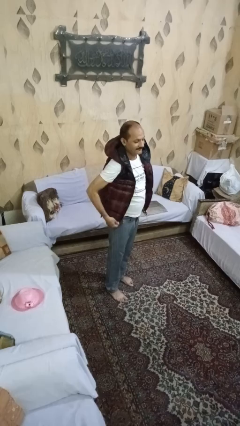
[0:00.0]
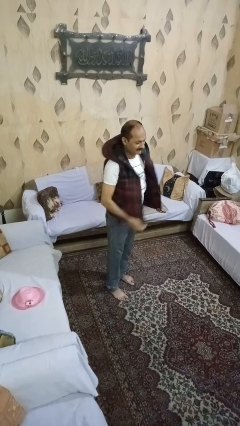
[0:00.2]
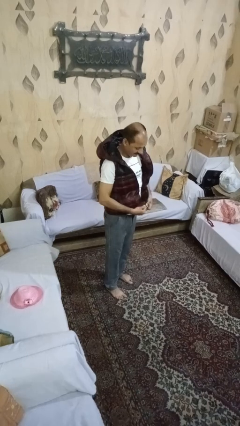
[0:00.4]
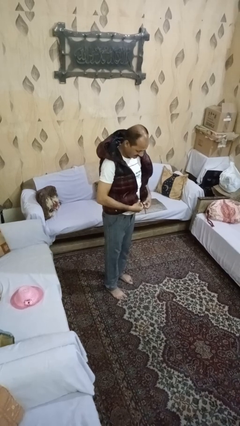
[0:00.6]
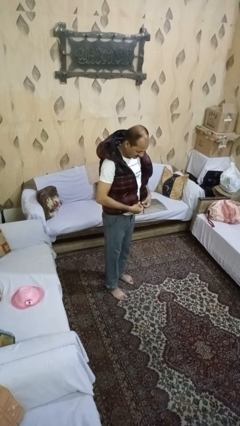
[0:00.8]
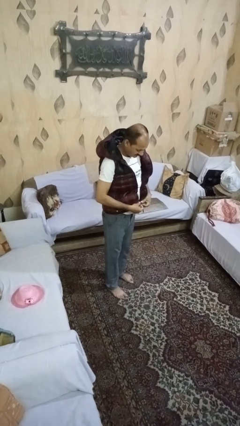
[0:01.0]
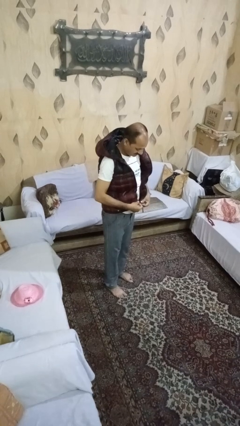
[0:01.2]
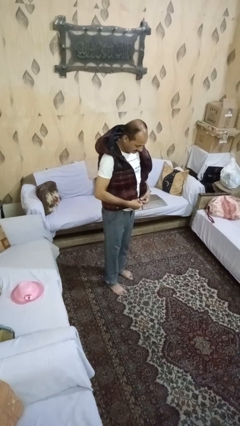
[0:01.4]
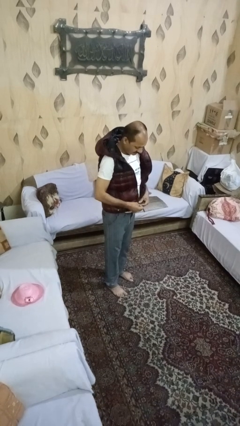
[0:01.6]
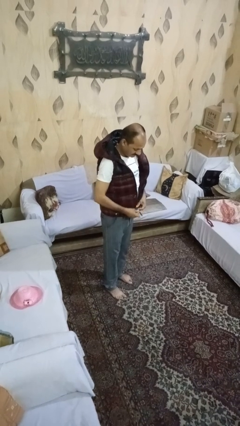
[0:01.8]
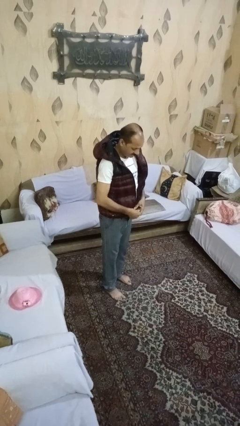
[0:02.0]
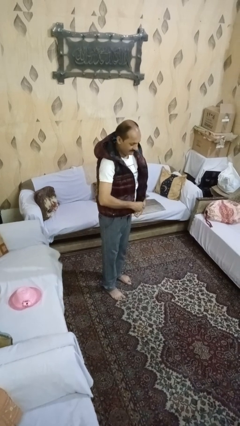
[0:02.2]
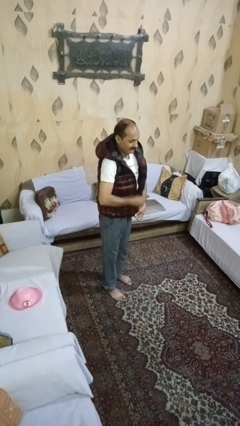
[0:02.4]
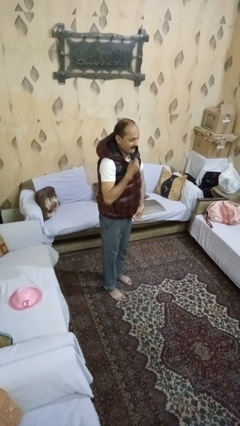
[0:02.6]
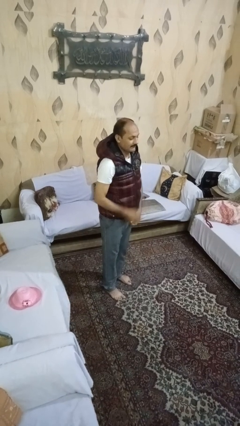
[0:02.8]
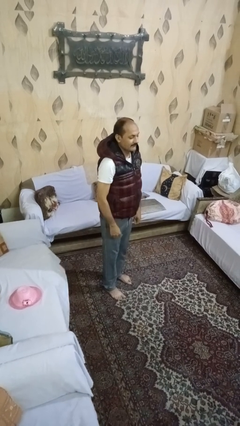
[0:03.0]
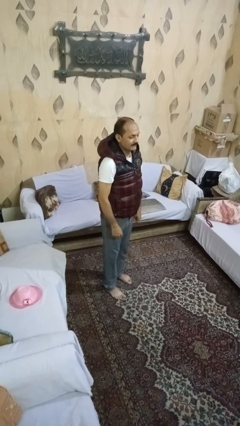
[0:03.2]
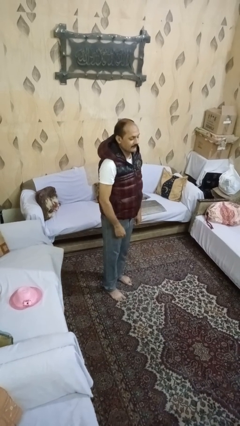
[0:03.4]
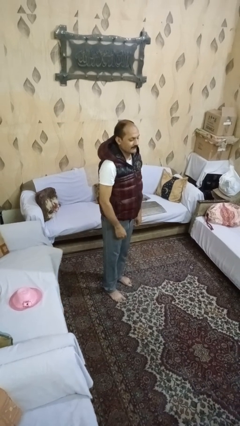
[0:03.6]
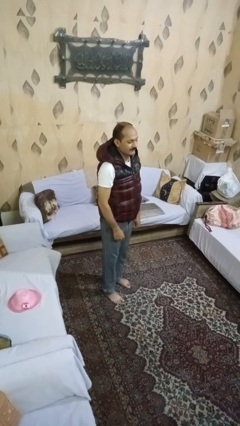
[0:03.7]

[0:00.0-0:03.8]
person zips up jacket

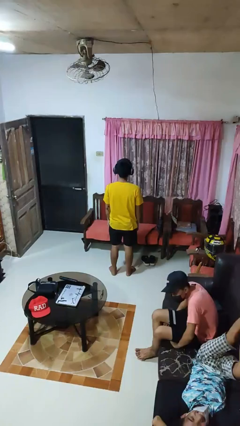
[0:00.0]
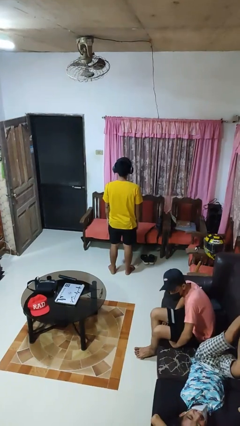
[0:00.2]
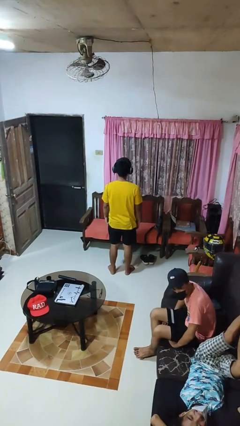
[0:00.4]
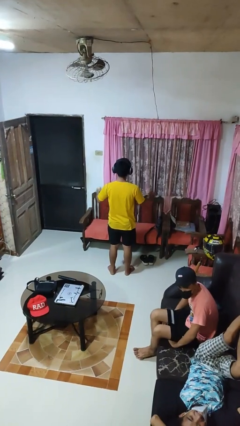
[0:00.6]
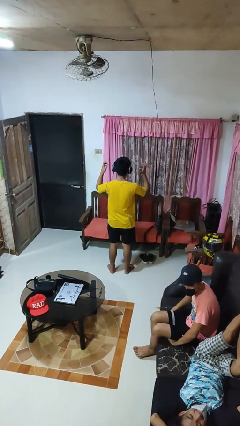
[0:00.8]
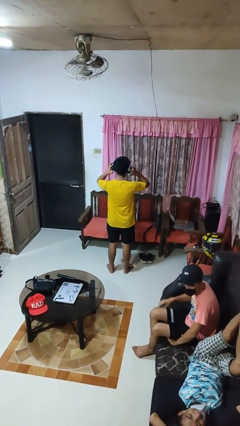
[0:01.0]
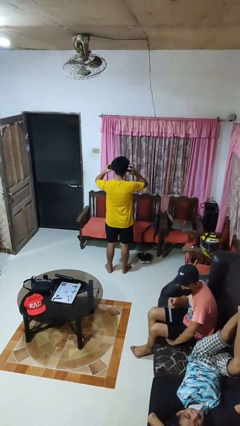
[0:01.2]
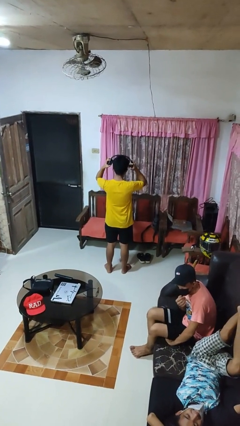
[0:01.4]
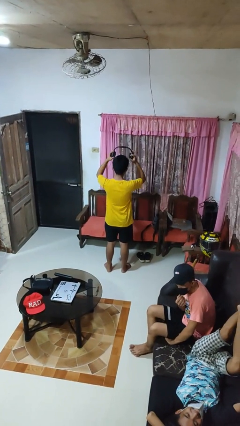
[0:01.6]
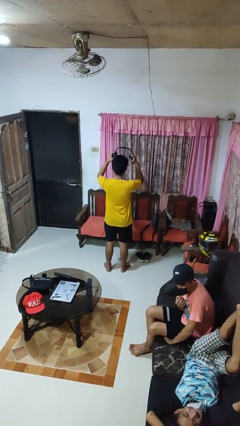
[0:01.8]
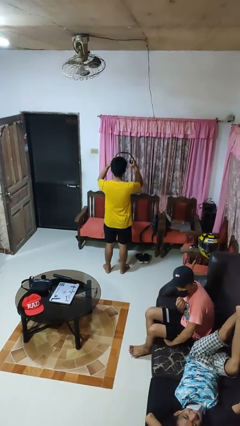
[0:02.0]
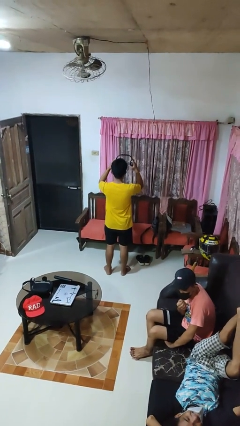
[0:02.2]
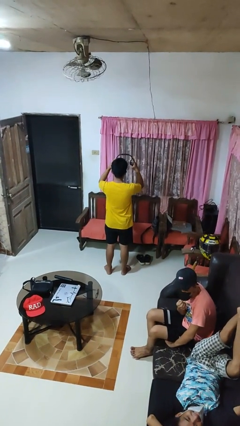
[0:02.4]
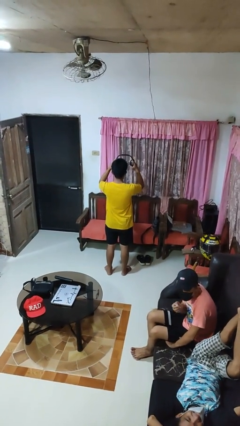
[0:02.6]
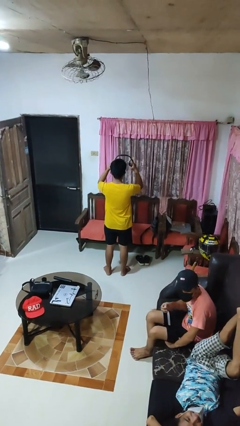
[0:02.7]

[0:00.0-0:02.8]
person takes off headphones

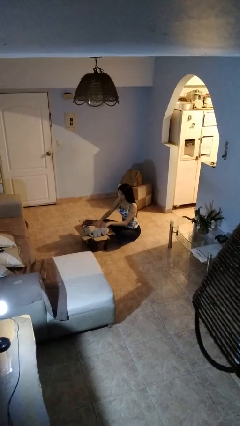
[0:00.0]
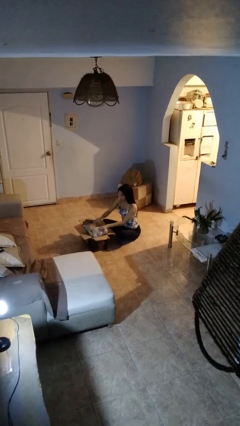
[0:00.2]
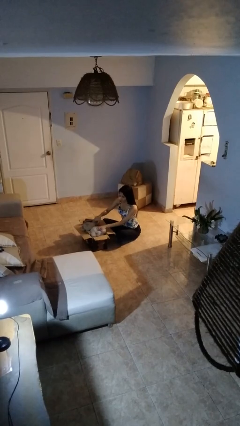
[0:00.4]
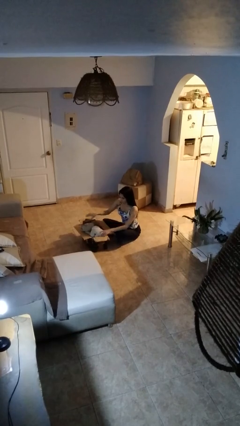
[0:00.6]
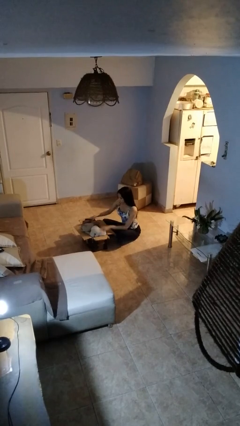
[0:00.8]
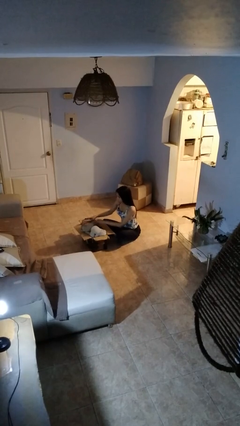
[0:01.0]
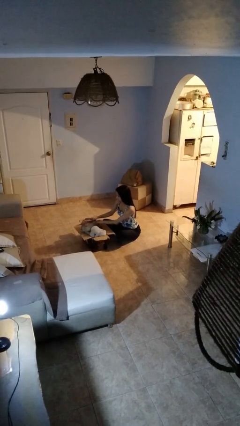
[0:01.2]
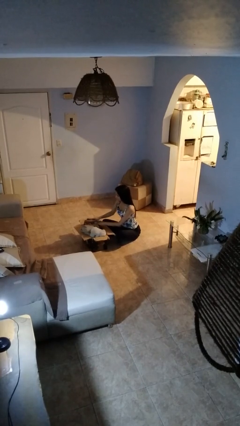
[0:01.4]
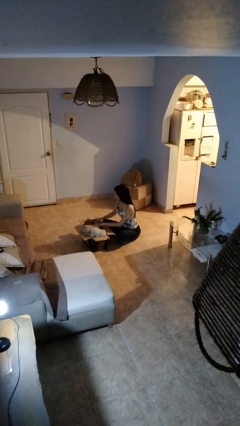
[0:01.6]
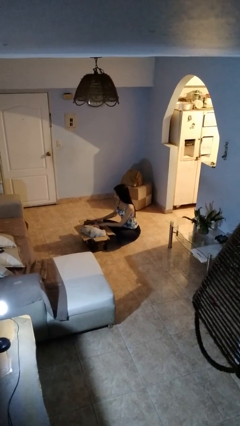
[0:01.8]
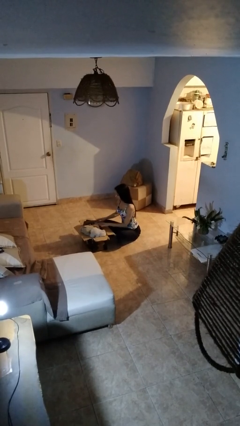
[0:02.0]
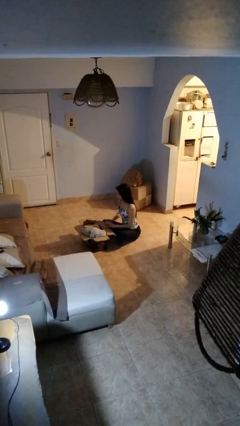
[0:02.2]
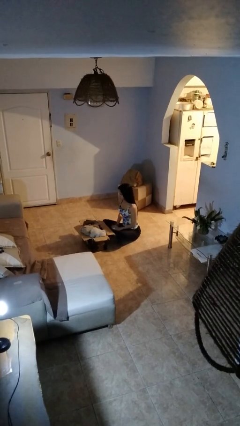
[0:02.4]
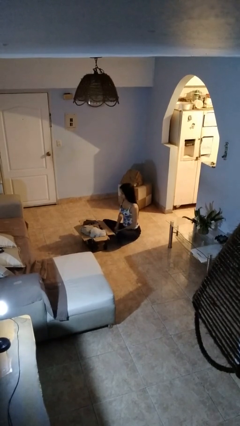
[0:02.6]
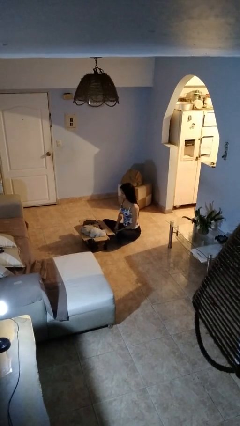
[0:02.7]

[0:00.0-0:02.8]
person searches in box

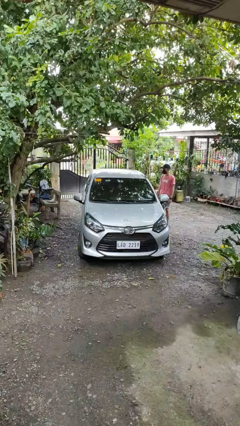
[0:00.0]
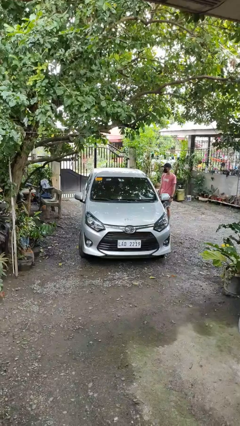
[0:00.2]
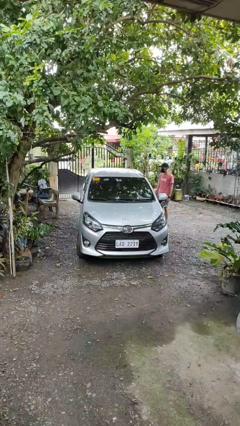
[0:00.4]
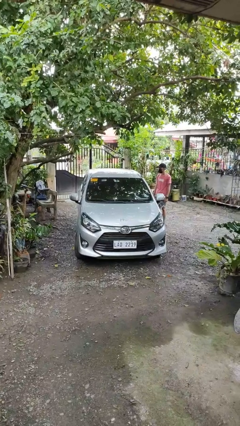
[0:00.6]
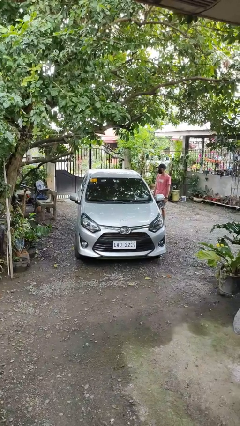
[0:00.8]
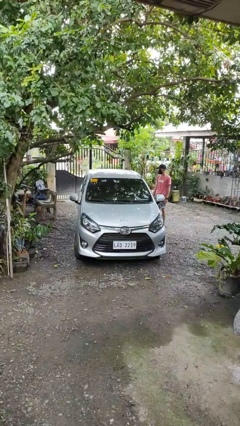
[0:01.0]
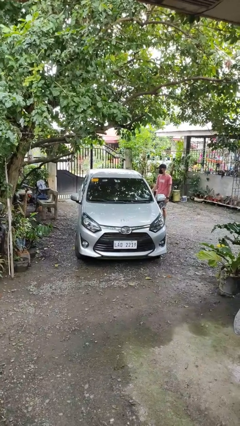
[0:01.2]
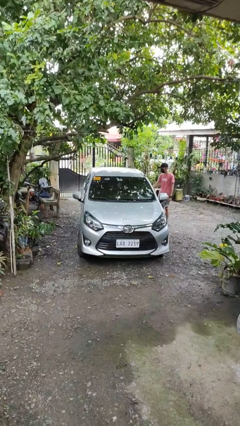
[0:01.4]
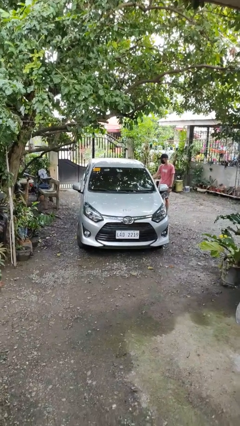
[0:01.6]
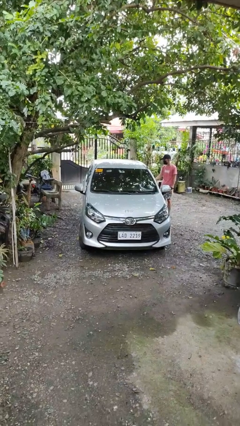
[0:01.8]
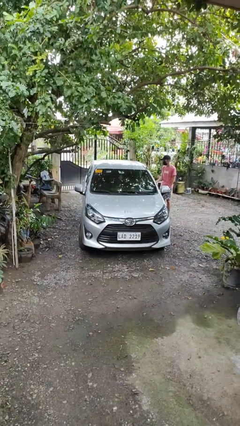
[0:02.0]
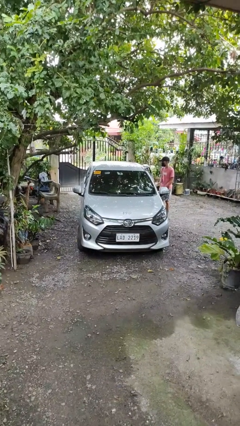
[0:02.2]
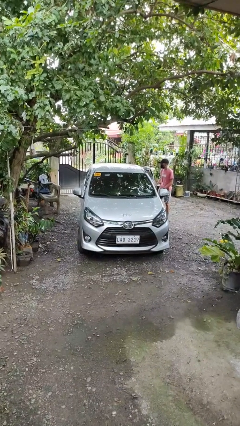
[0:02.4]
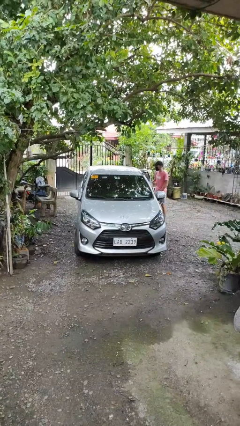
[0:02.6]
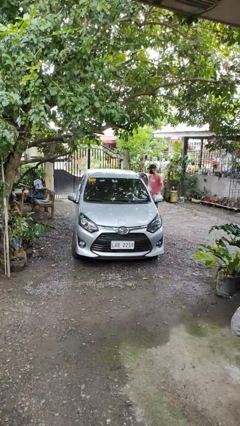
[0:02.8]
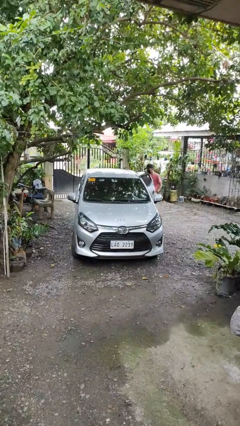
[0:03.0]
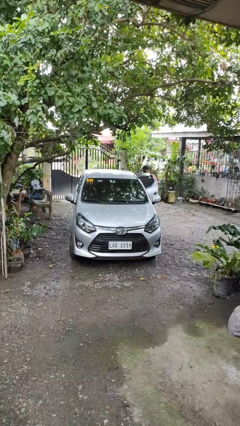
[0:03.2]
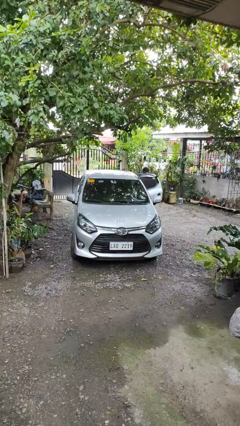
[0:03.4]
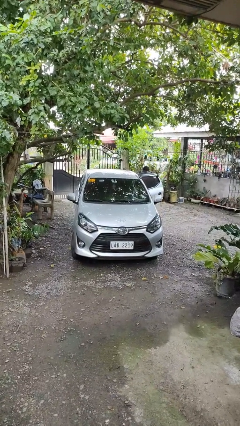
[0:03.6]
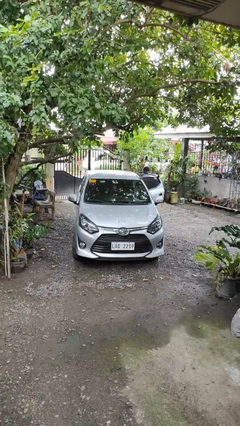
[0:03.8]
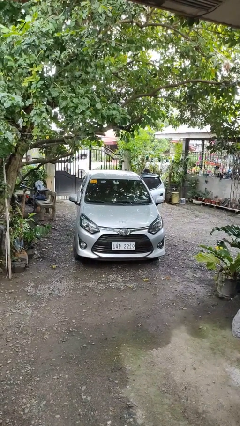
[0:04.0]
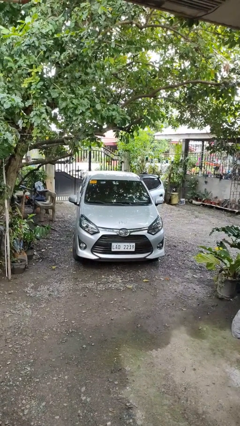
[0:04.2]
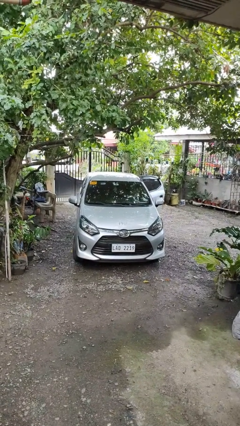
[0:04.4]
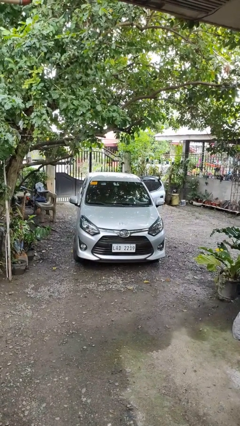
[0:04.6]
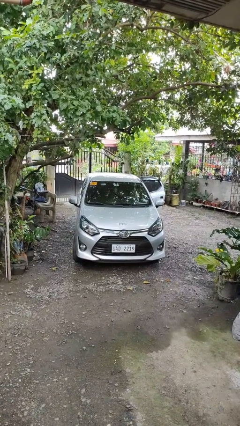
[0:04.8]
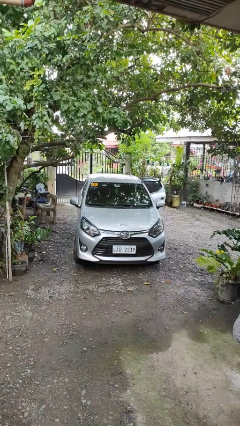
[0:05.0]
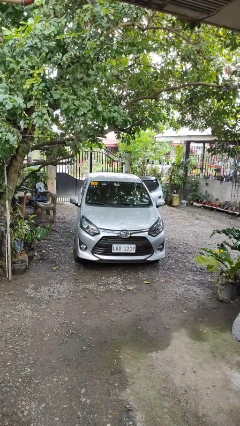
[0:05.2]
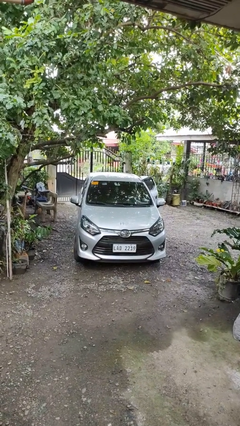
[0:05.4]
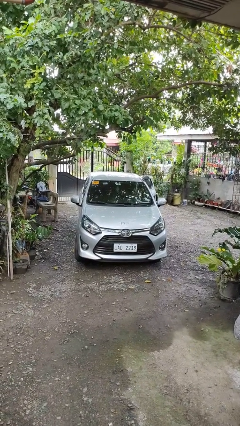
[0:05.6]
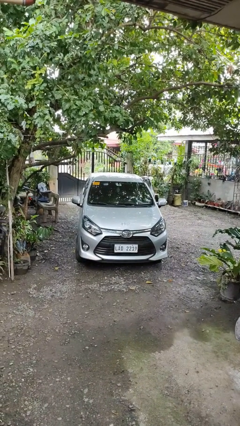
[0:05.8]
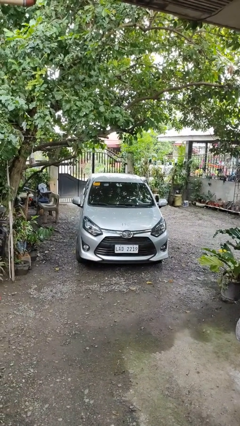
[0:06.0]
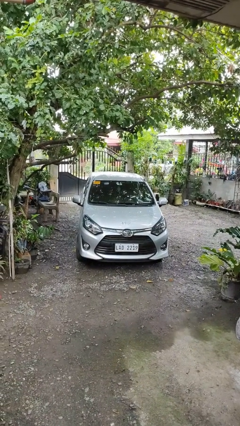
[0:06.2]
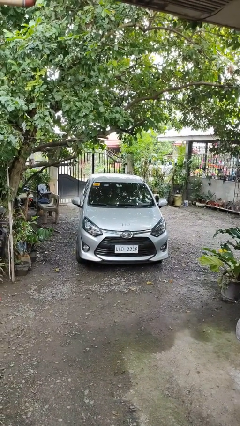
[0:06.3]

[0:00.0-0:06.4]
car picks up person

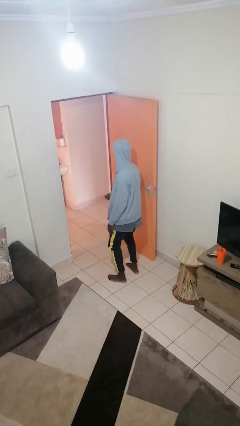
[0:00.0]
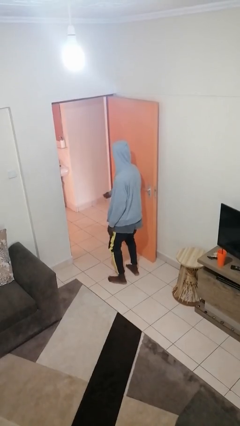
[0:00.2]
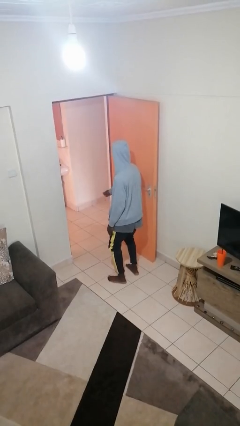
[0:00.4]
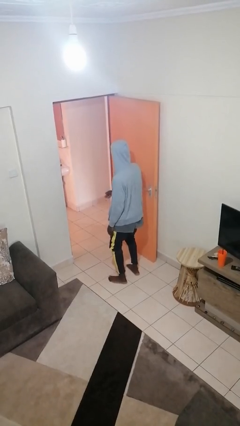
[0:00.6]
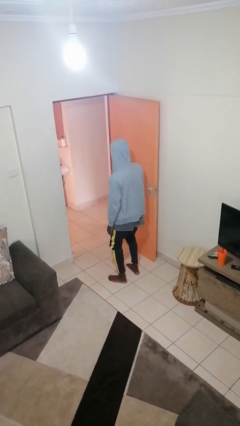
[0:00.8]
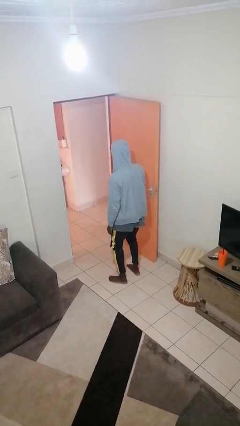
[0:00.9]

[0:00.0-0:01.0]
person karate chop

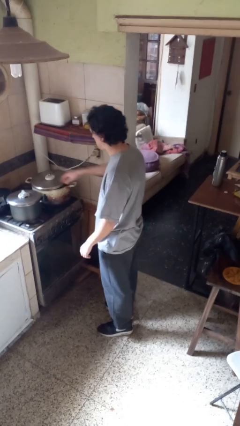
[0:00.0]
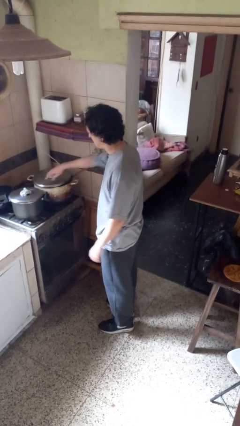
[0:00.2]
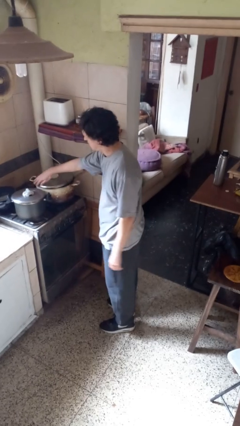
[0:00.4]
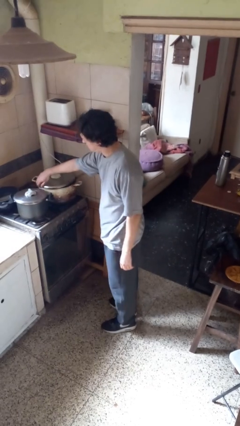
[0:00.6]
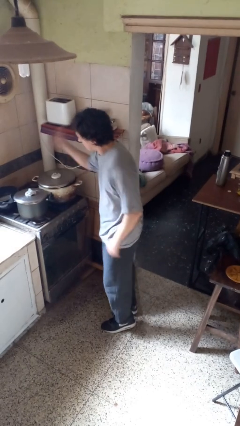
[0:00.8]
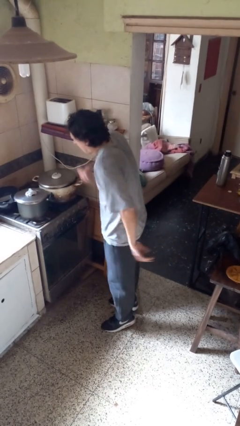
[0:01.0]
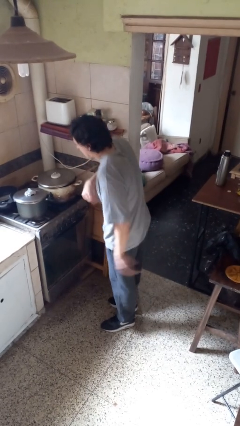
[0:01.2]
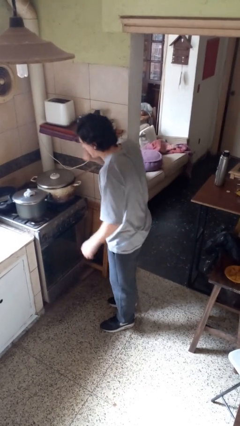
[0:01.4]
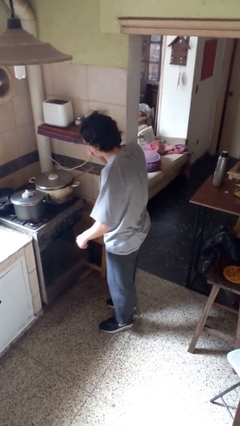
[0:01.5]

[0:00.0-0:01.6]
person burns hand
